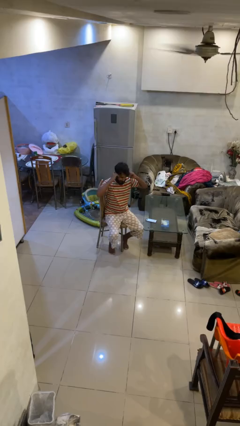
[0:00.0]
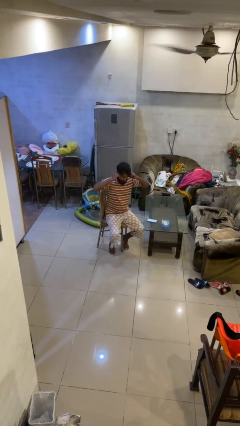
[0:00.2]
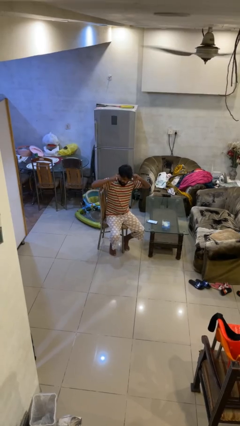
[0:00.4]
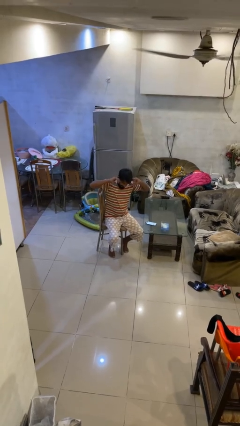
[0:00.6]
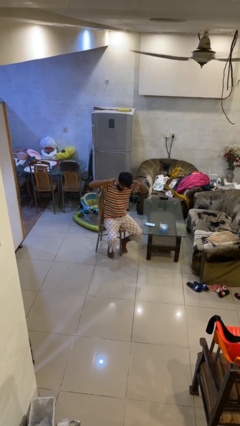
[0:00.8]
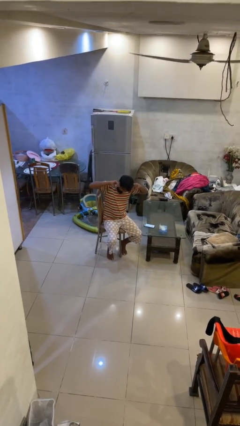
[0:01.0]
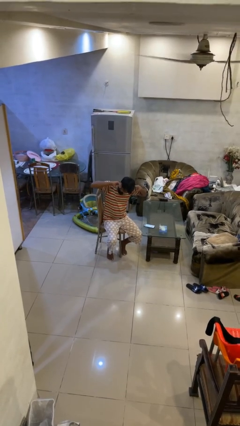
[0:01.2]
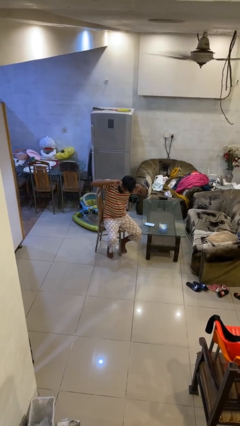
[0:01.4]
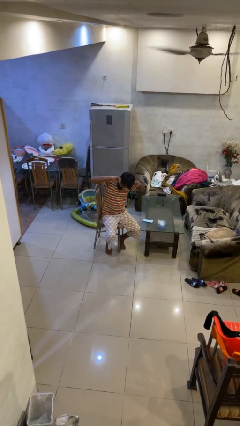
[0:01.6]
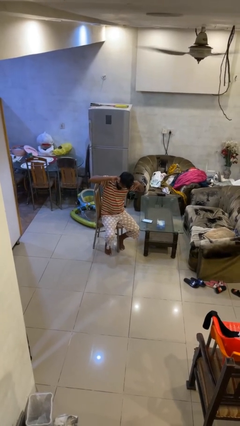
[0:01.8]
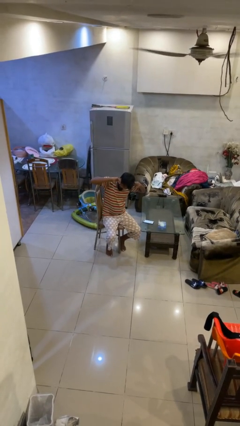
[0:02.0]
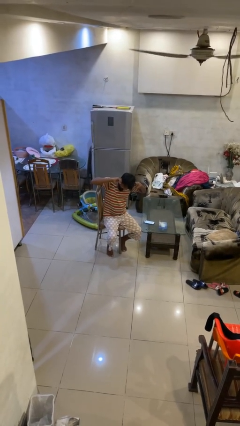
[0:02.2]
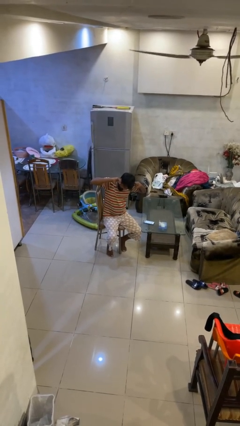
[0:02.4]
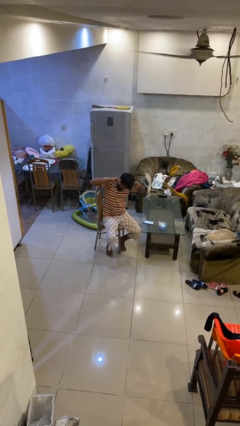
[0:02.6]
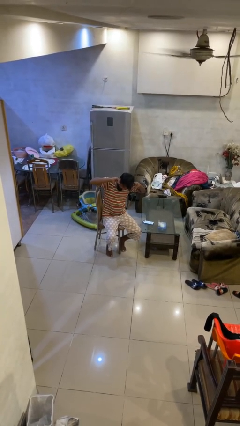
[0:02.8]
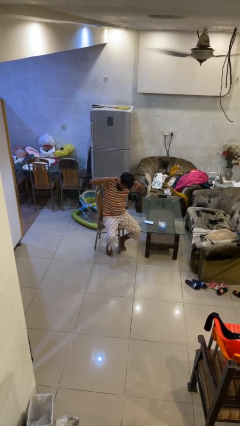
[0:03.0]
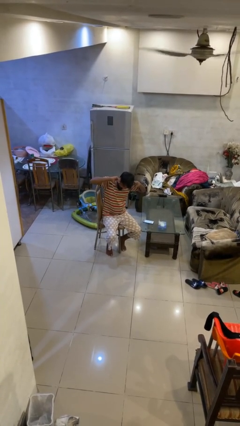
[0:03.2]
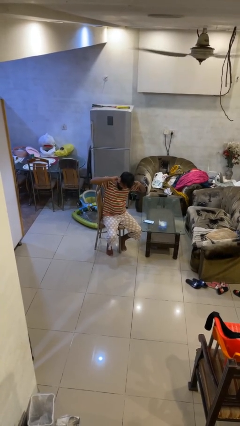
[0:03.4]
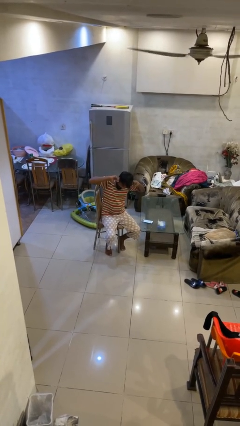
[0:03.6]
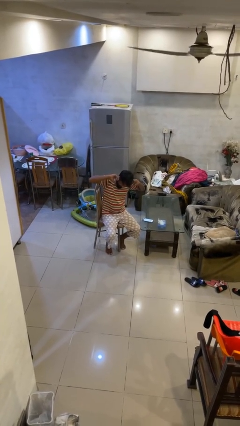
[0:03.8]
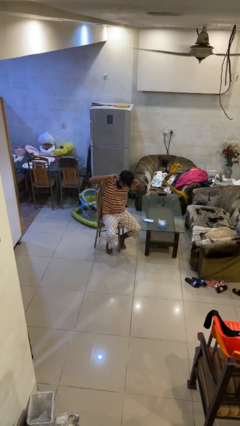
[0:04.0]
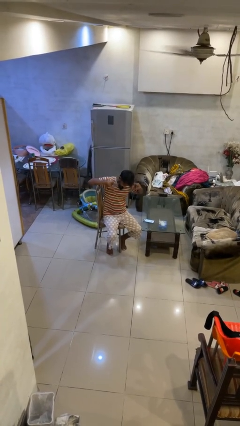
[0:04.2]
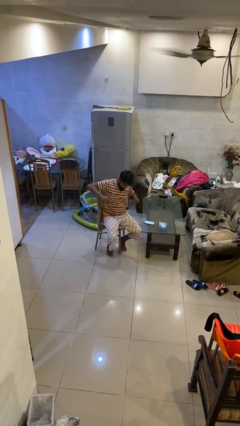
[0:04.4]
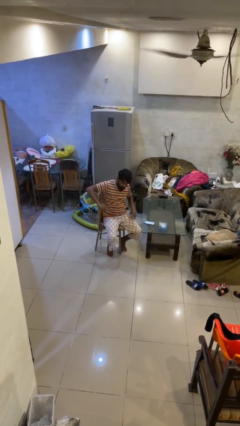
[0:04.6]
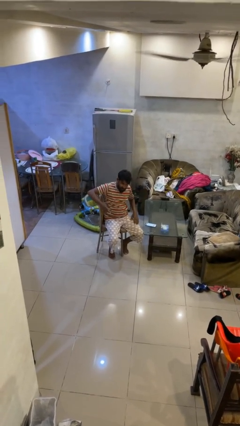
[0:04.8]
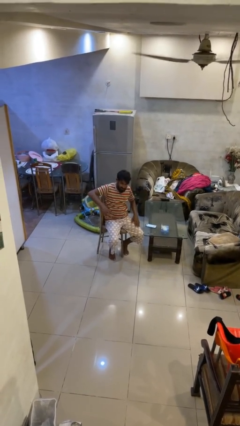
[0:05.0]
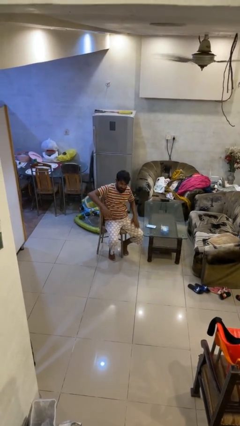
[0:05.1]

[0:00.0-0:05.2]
person puts fingers in ear

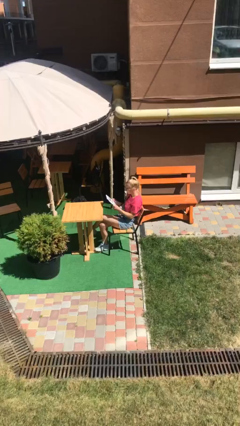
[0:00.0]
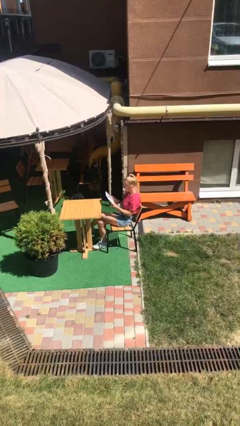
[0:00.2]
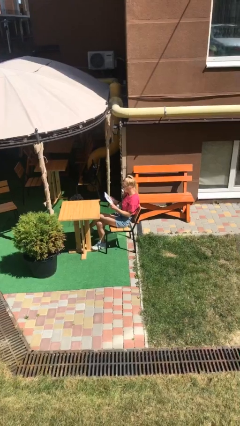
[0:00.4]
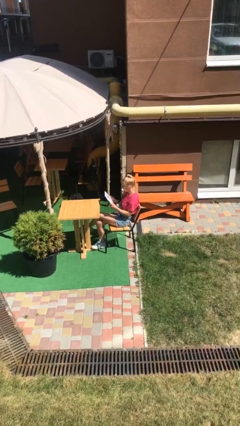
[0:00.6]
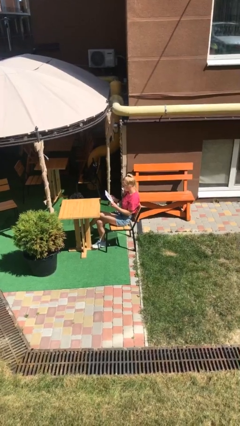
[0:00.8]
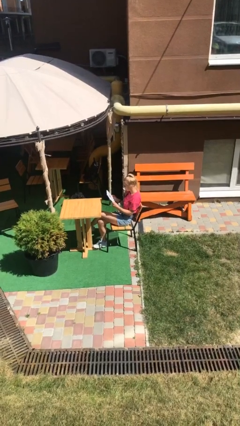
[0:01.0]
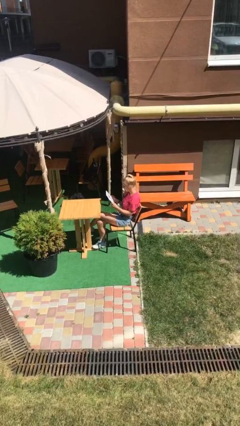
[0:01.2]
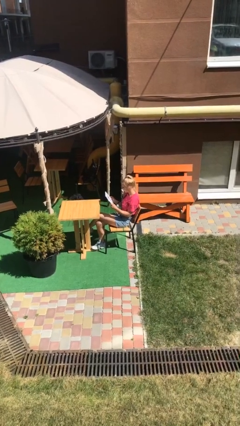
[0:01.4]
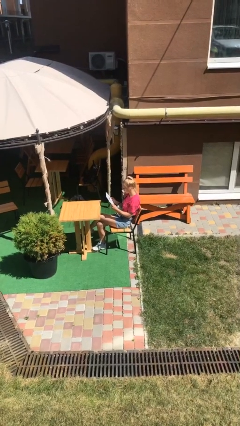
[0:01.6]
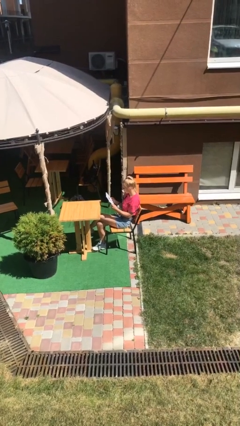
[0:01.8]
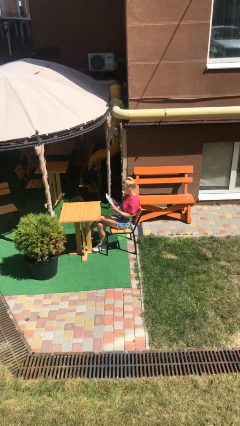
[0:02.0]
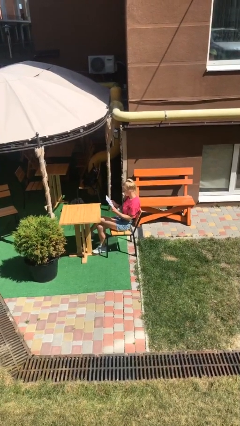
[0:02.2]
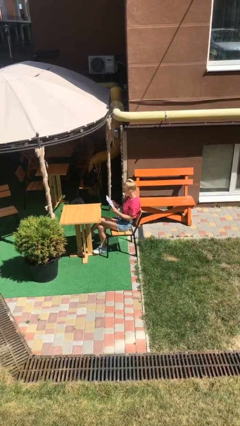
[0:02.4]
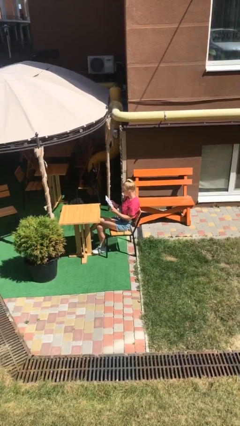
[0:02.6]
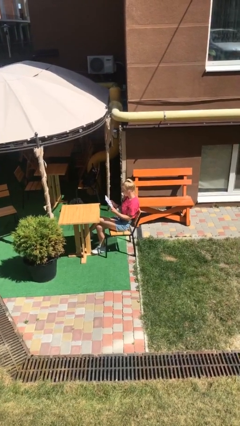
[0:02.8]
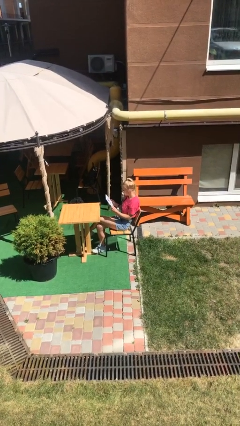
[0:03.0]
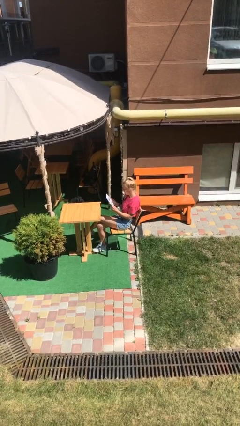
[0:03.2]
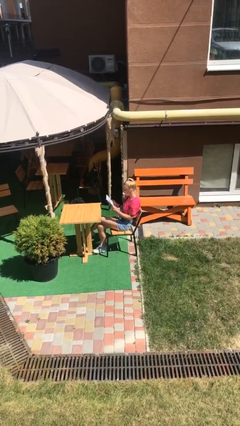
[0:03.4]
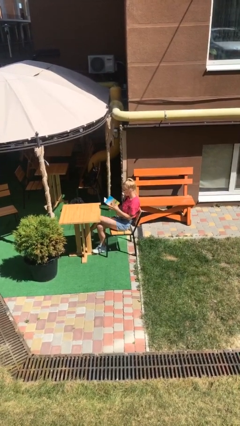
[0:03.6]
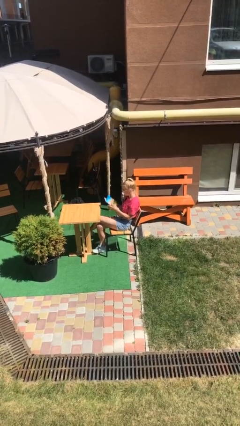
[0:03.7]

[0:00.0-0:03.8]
person reads document

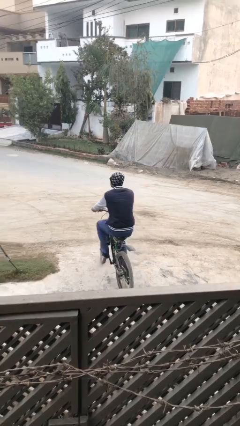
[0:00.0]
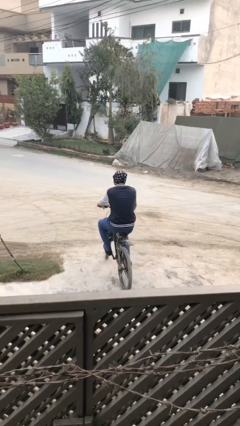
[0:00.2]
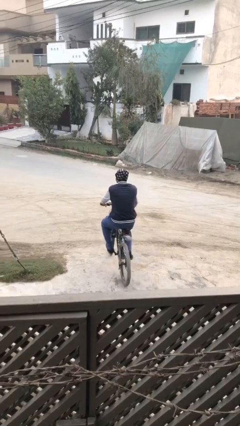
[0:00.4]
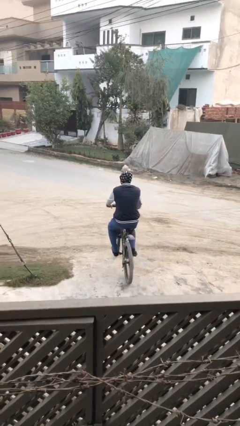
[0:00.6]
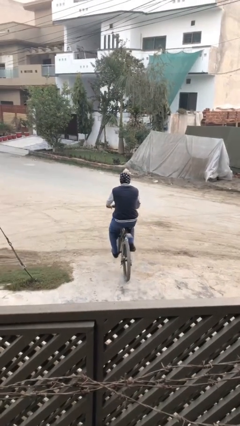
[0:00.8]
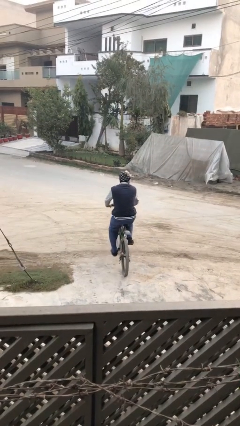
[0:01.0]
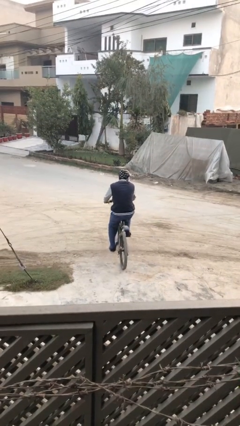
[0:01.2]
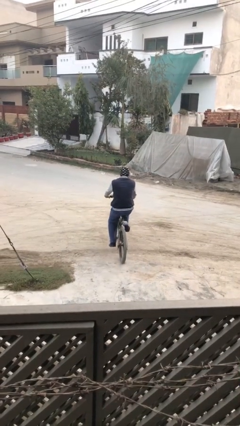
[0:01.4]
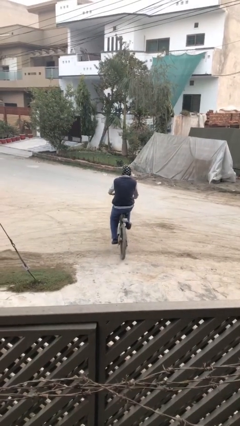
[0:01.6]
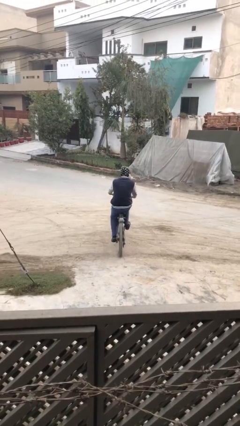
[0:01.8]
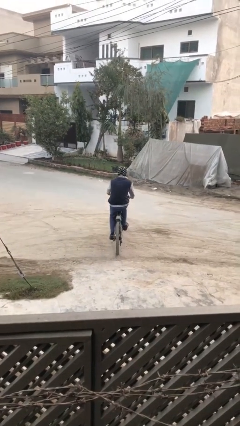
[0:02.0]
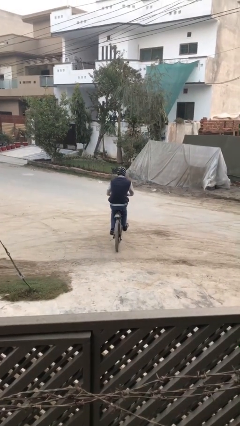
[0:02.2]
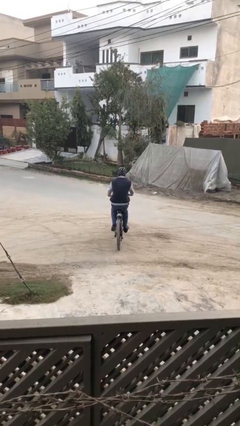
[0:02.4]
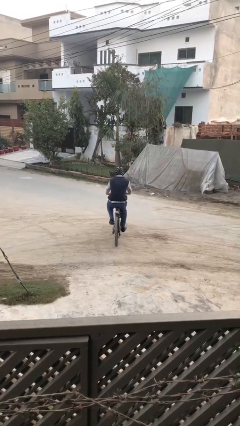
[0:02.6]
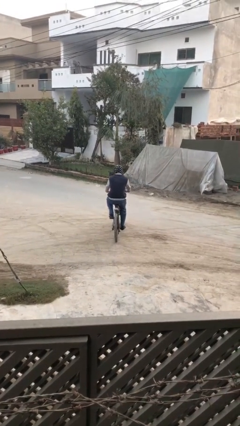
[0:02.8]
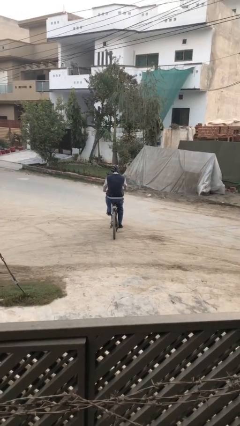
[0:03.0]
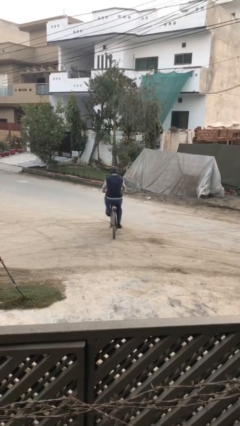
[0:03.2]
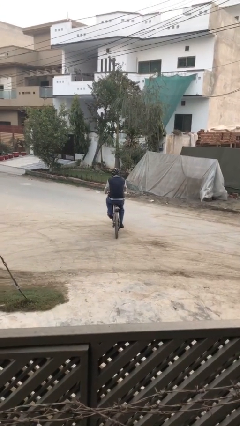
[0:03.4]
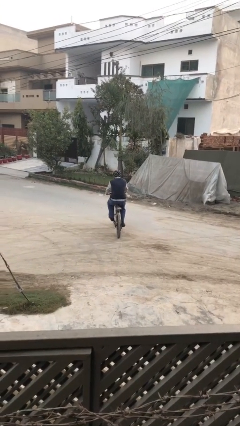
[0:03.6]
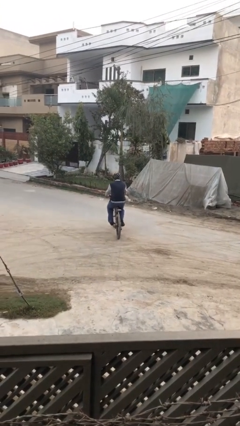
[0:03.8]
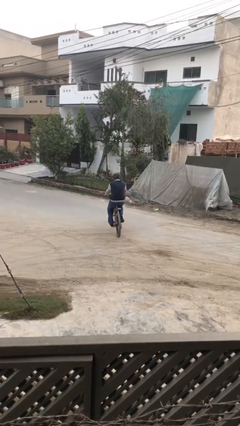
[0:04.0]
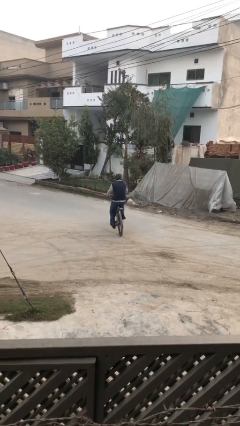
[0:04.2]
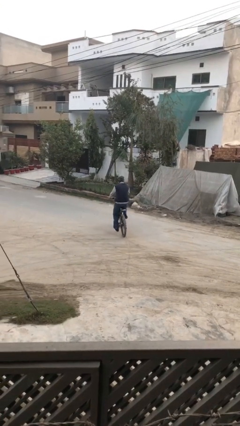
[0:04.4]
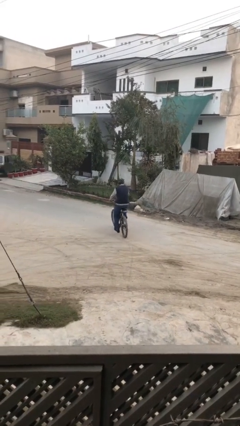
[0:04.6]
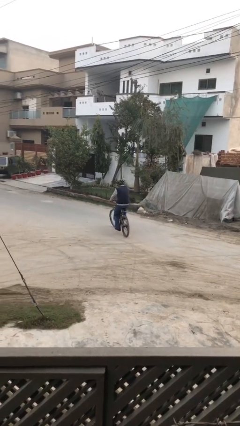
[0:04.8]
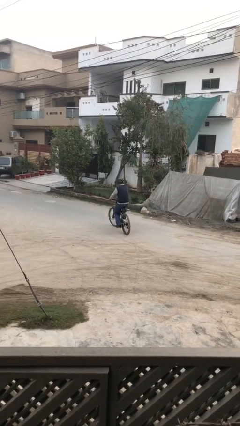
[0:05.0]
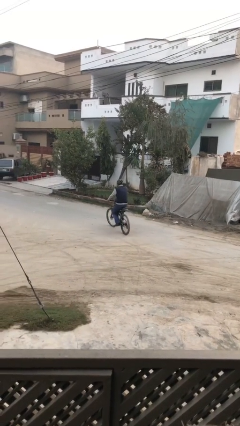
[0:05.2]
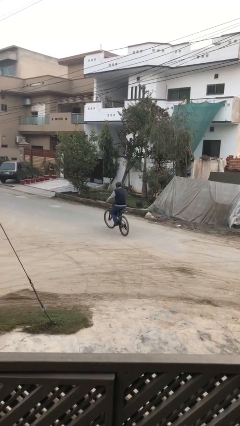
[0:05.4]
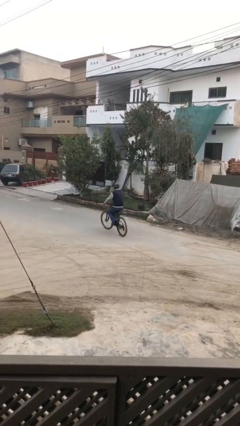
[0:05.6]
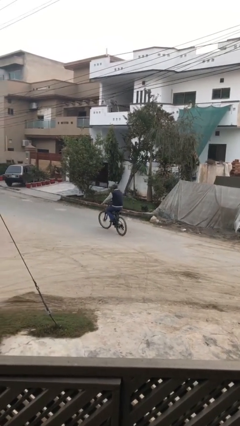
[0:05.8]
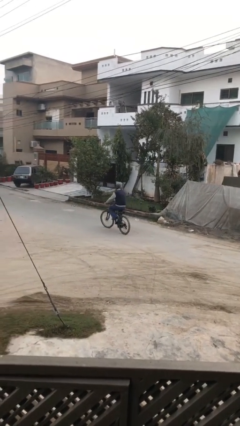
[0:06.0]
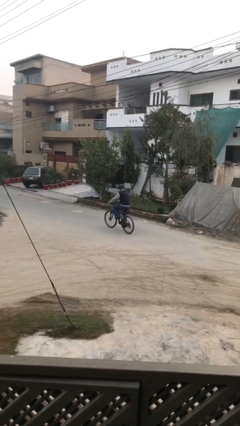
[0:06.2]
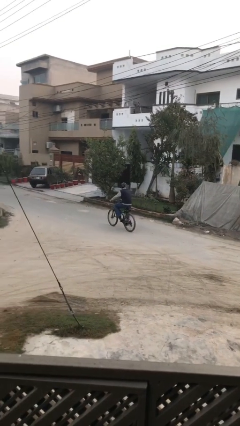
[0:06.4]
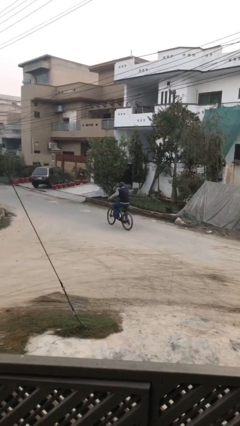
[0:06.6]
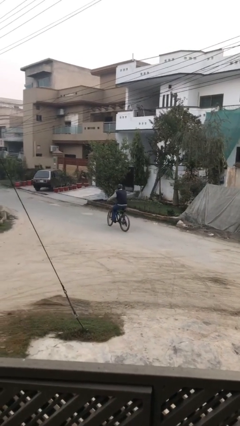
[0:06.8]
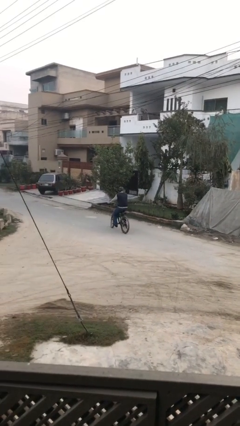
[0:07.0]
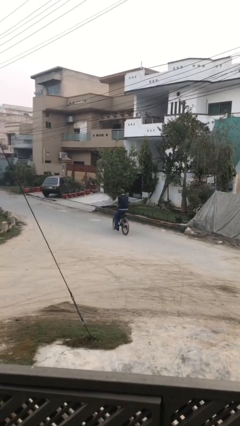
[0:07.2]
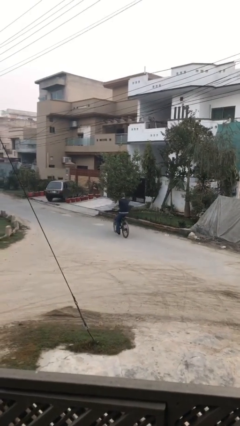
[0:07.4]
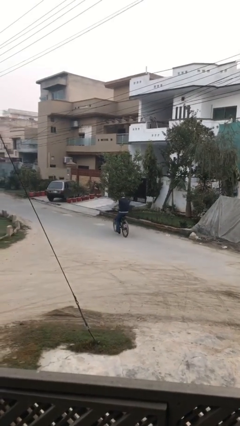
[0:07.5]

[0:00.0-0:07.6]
person rides bicycle

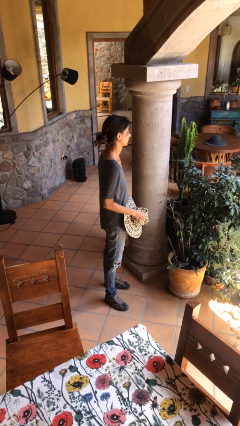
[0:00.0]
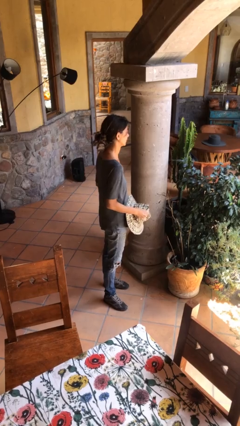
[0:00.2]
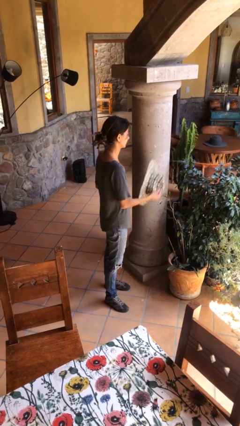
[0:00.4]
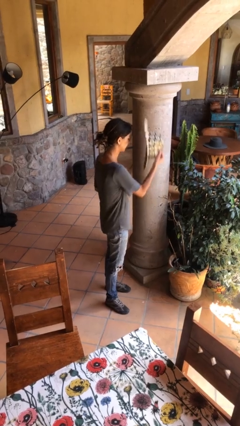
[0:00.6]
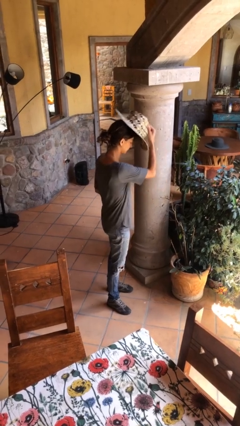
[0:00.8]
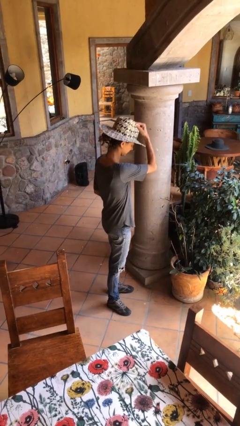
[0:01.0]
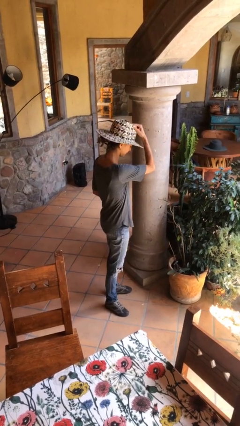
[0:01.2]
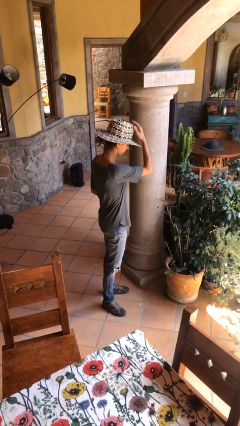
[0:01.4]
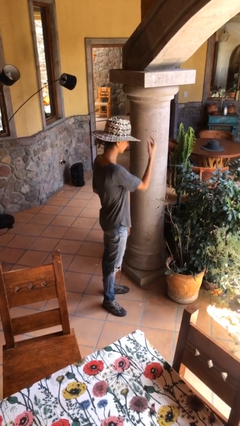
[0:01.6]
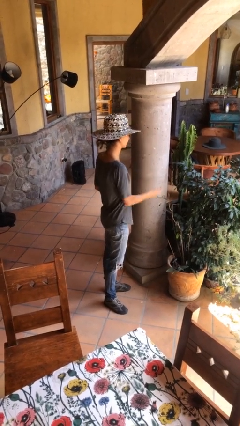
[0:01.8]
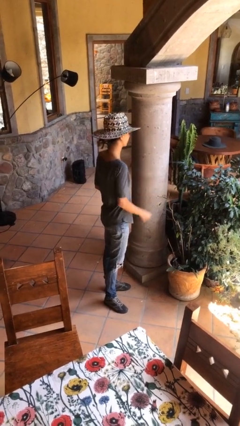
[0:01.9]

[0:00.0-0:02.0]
person puts on hat
